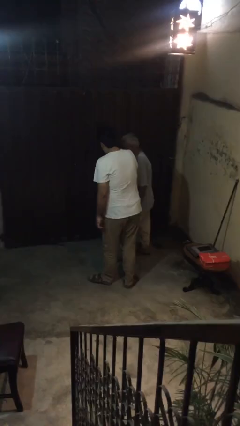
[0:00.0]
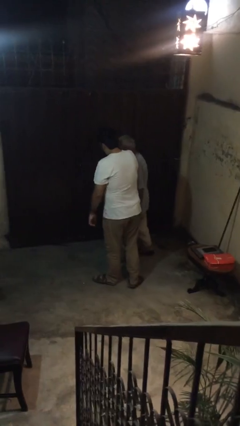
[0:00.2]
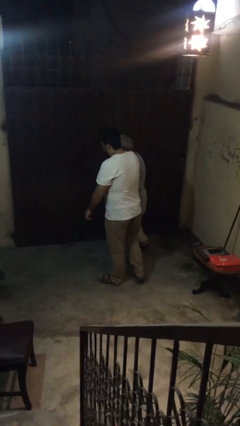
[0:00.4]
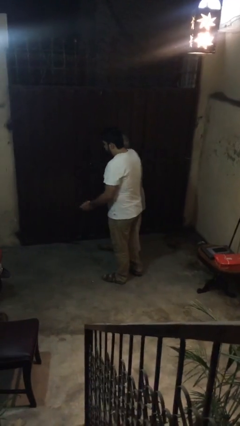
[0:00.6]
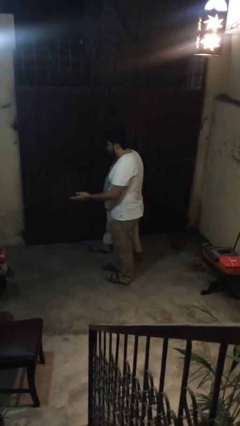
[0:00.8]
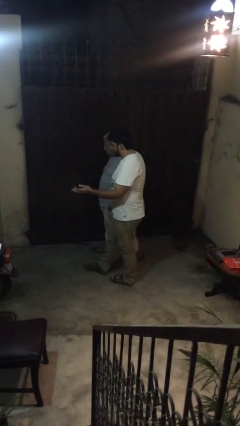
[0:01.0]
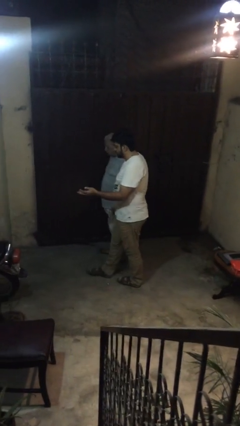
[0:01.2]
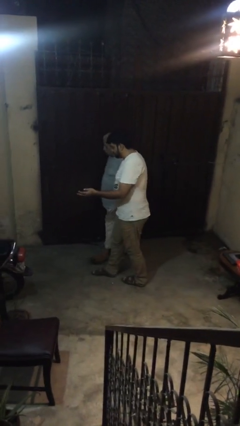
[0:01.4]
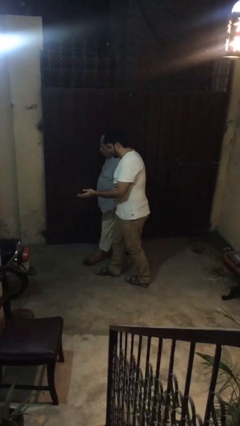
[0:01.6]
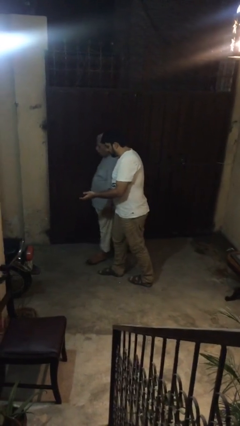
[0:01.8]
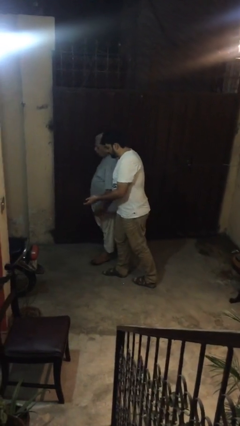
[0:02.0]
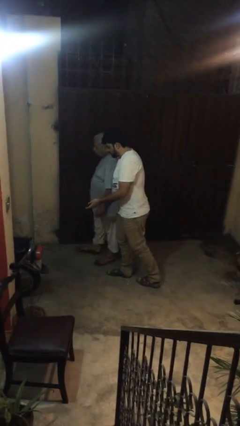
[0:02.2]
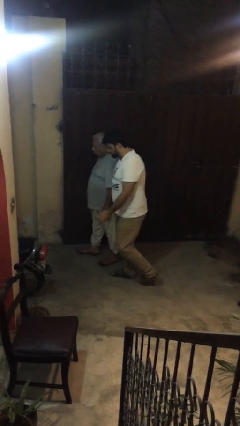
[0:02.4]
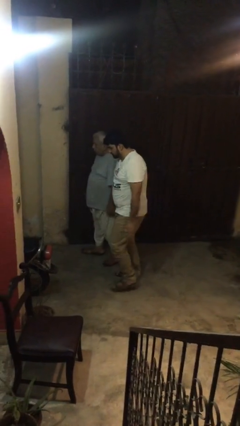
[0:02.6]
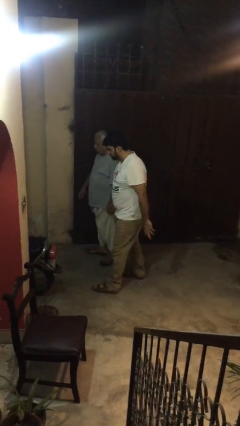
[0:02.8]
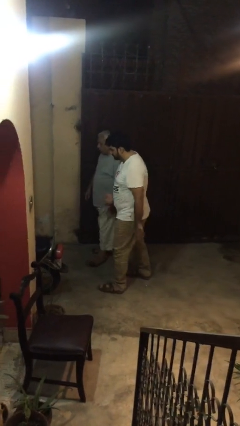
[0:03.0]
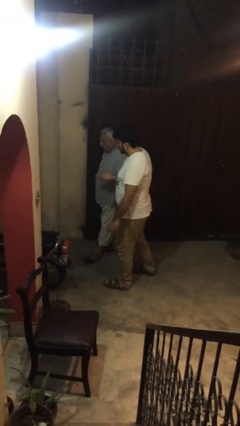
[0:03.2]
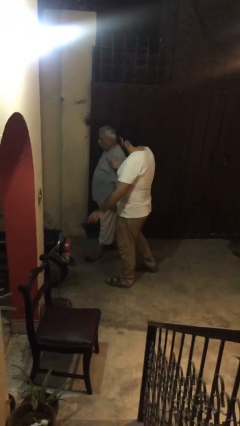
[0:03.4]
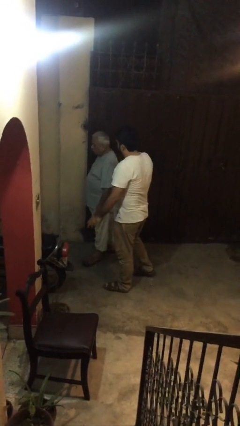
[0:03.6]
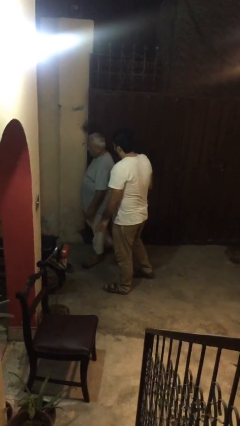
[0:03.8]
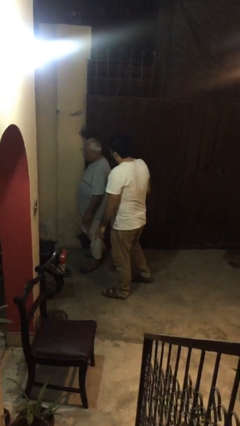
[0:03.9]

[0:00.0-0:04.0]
person talks to person

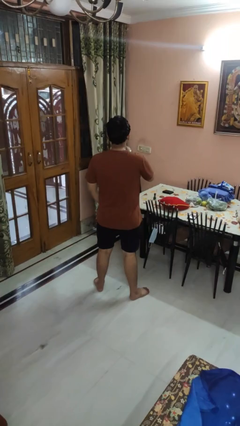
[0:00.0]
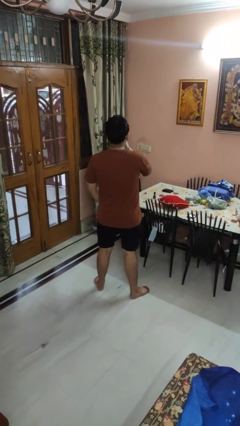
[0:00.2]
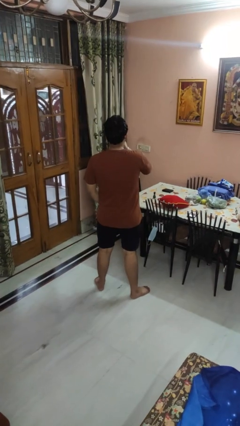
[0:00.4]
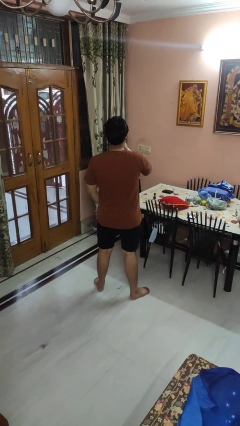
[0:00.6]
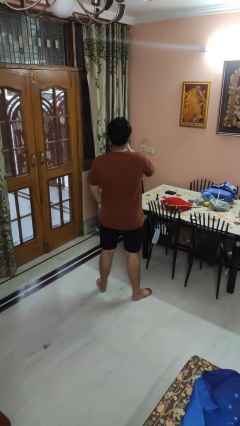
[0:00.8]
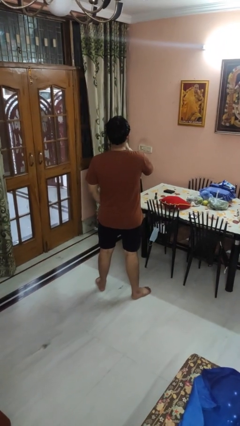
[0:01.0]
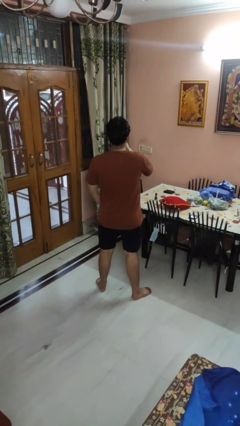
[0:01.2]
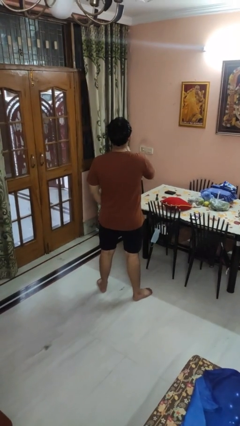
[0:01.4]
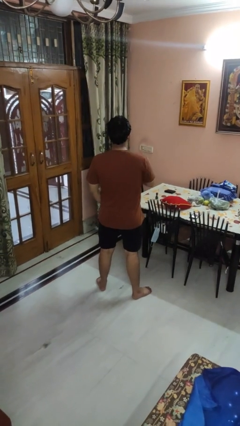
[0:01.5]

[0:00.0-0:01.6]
person gestures be quiet

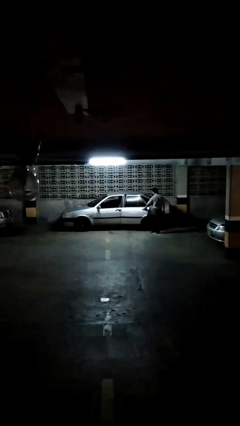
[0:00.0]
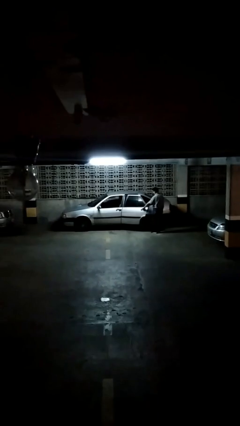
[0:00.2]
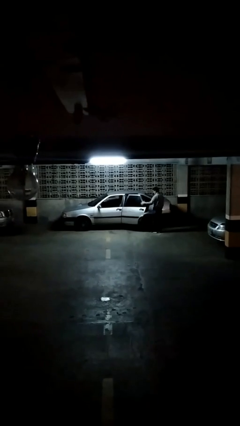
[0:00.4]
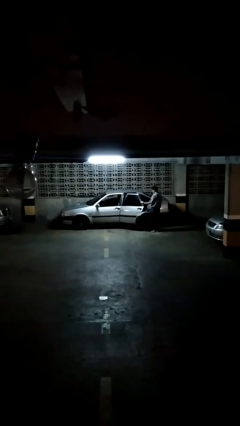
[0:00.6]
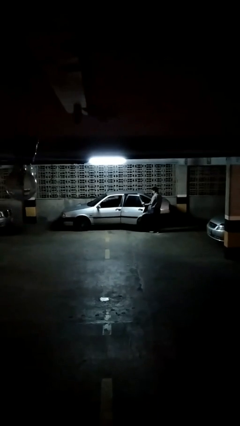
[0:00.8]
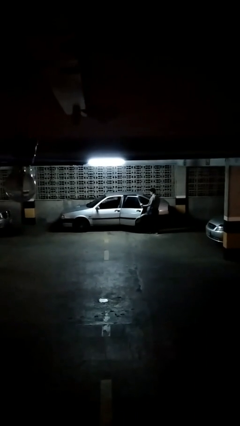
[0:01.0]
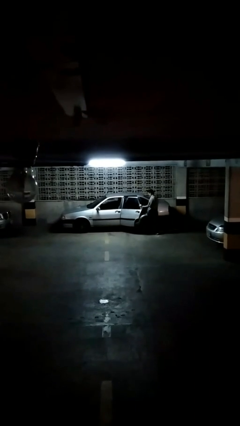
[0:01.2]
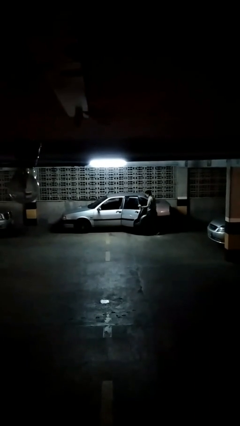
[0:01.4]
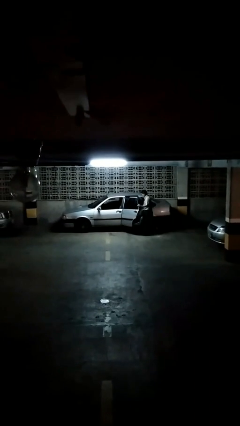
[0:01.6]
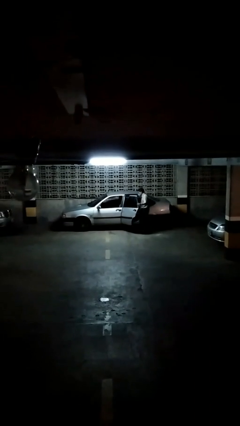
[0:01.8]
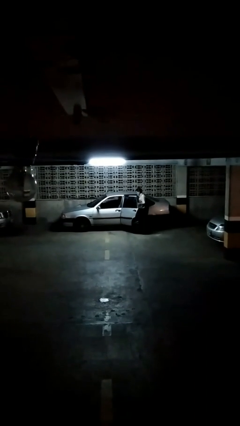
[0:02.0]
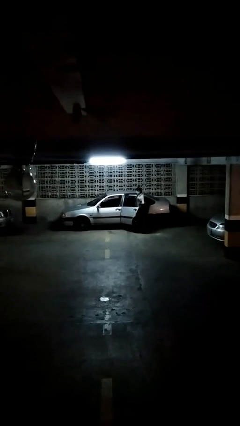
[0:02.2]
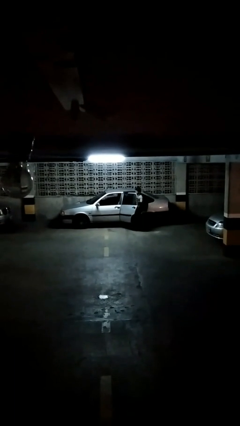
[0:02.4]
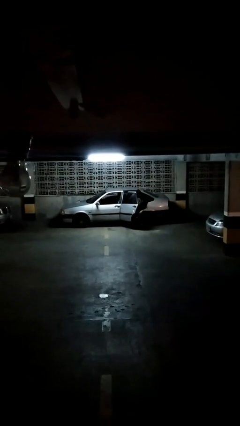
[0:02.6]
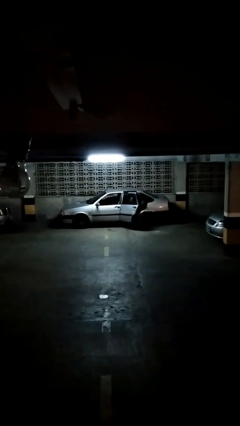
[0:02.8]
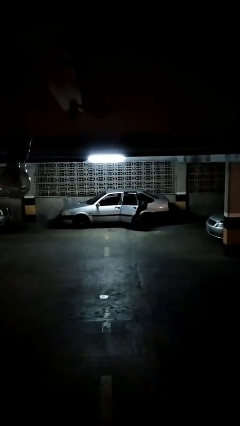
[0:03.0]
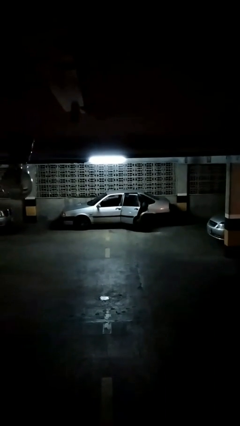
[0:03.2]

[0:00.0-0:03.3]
car picks up person

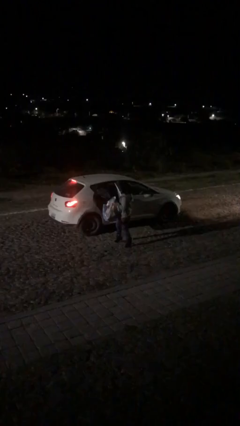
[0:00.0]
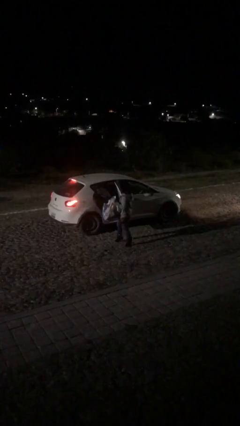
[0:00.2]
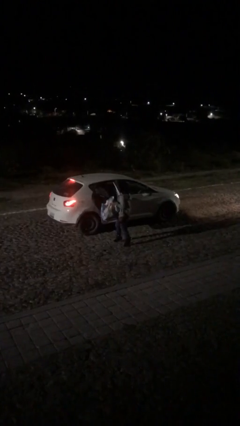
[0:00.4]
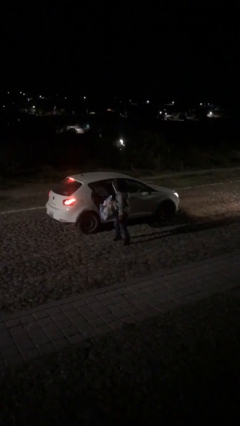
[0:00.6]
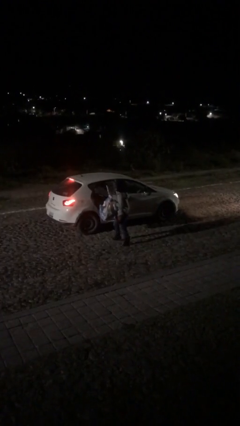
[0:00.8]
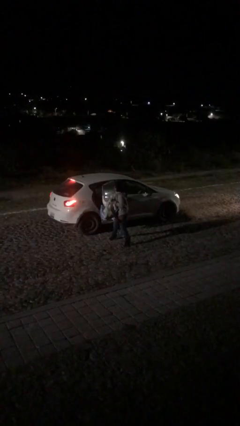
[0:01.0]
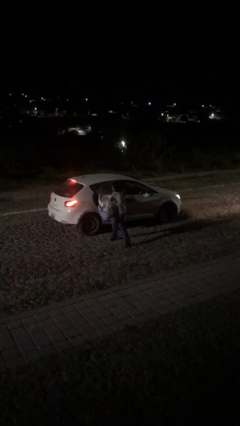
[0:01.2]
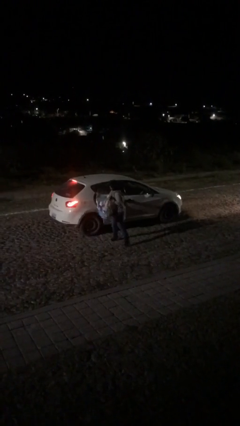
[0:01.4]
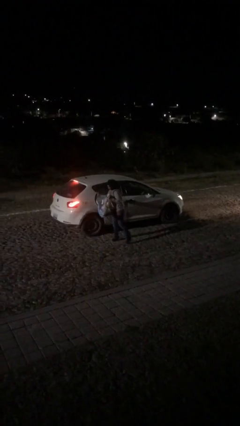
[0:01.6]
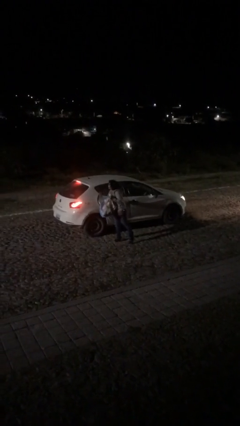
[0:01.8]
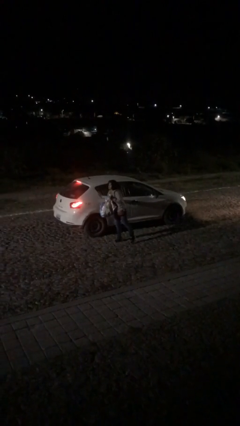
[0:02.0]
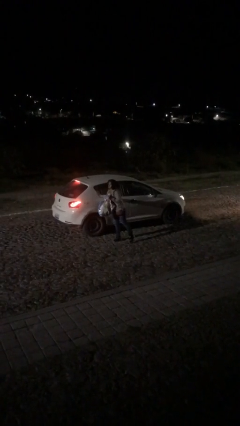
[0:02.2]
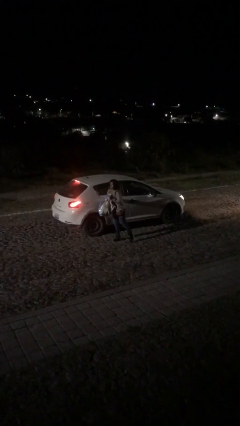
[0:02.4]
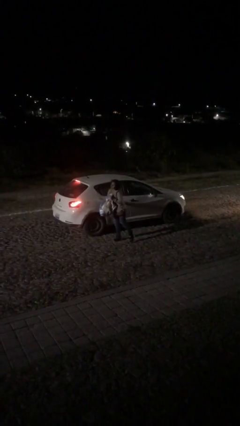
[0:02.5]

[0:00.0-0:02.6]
person closes car door

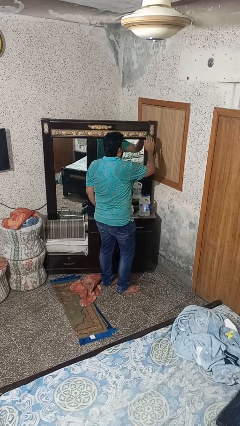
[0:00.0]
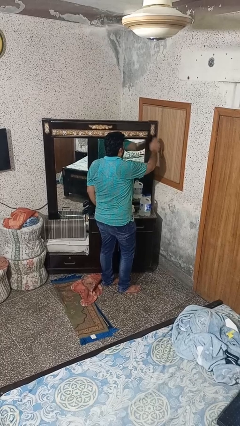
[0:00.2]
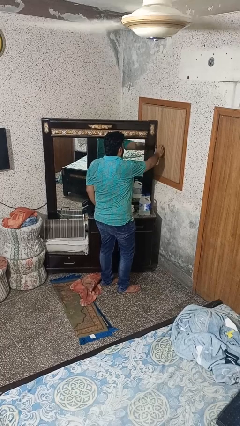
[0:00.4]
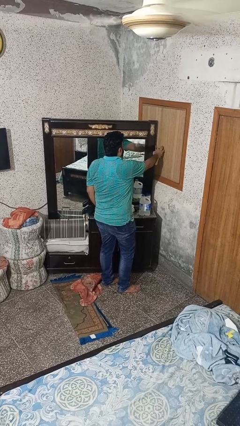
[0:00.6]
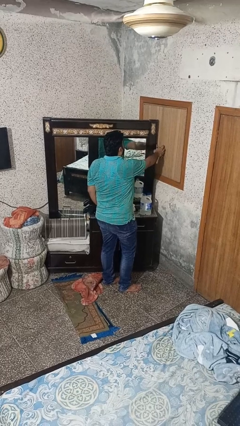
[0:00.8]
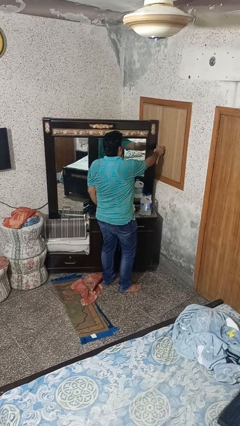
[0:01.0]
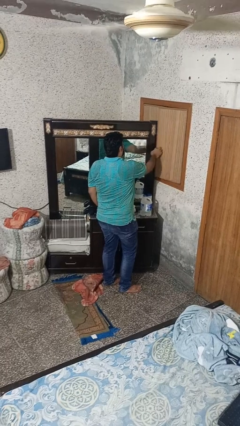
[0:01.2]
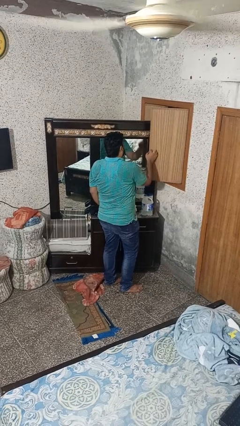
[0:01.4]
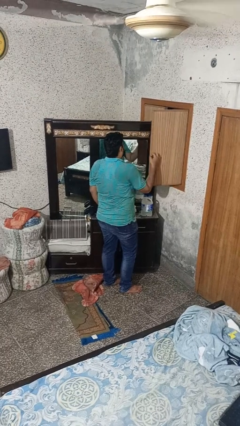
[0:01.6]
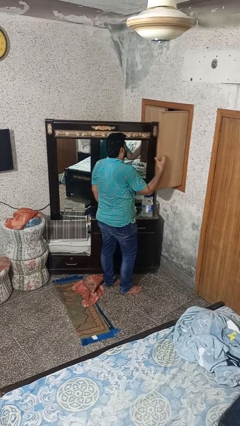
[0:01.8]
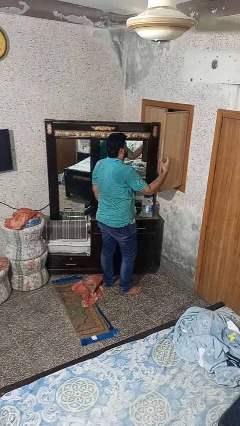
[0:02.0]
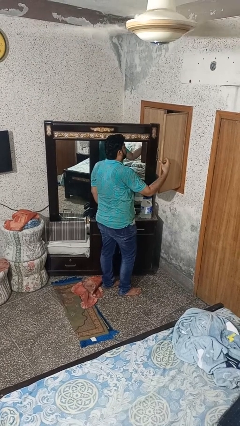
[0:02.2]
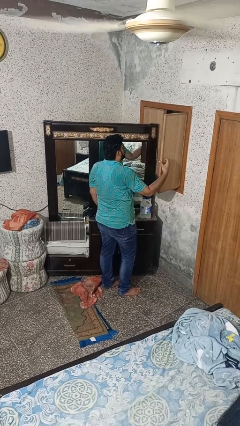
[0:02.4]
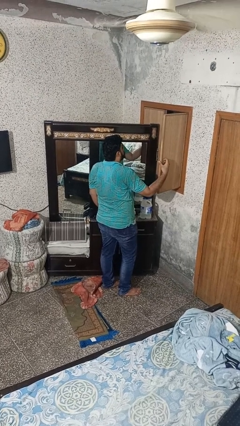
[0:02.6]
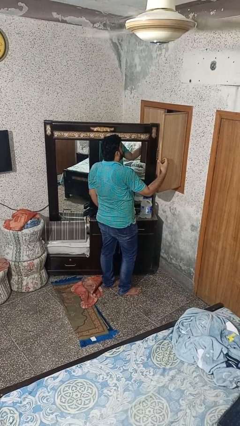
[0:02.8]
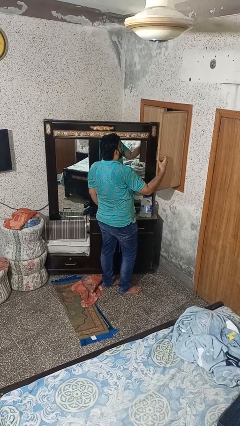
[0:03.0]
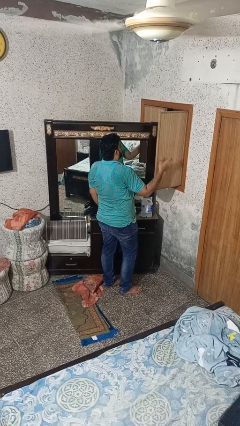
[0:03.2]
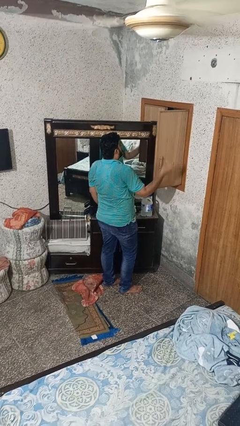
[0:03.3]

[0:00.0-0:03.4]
person opens home window

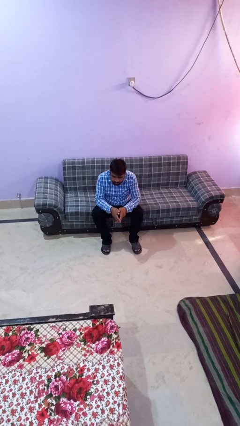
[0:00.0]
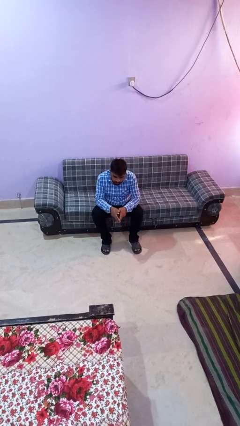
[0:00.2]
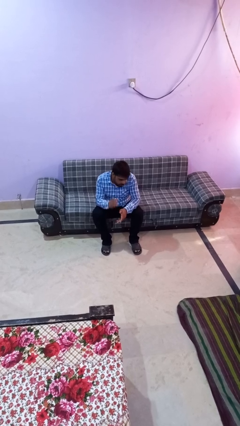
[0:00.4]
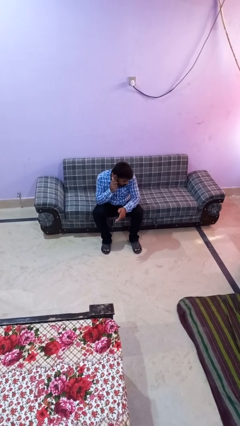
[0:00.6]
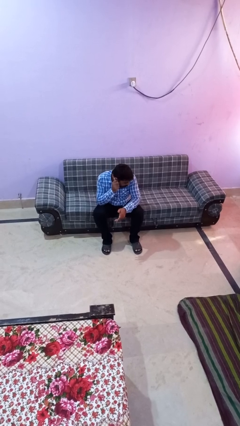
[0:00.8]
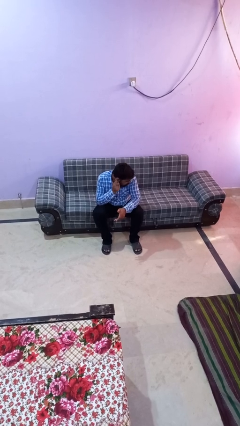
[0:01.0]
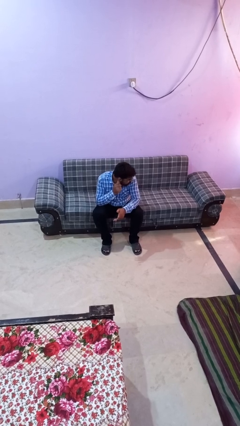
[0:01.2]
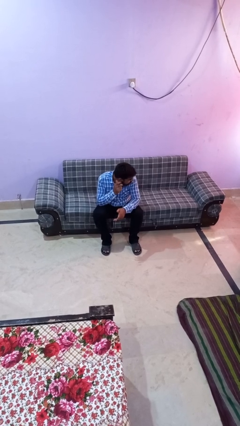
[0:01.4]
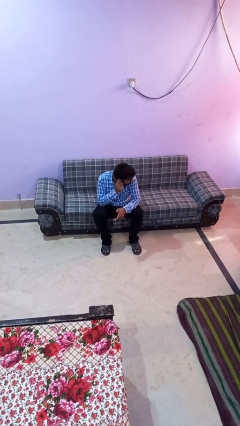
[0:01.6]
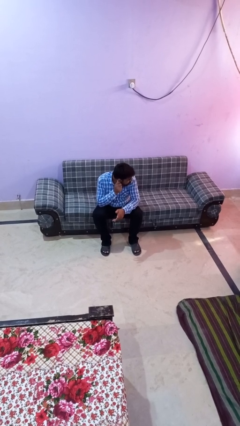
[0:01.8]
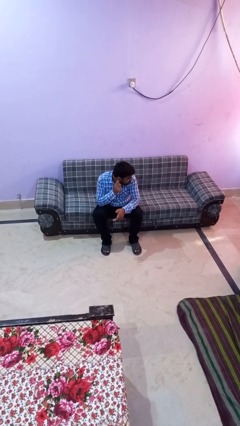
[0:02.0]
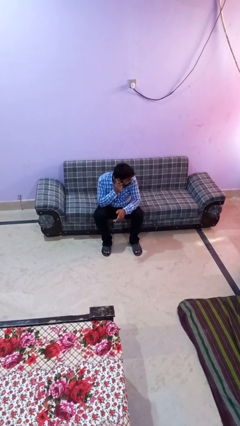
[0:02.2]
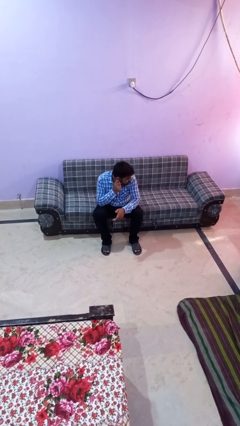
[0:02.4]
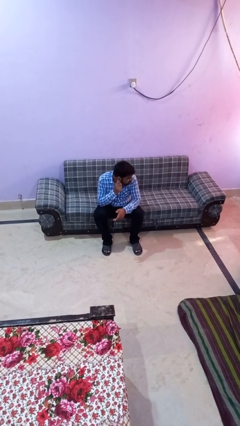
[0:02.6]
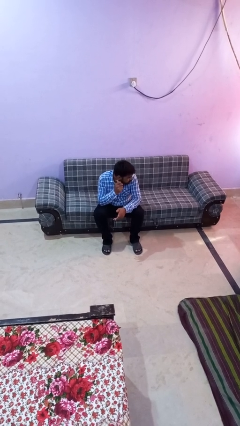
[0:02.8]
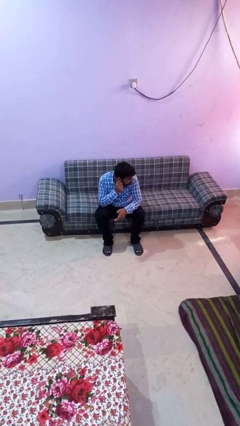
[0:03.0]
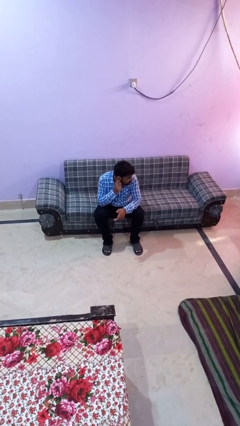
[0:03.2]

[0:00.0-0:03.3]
person touches earlobe
